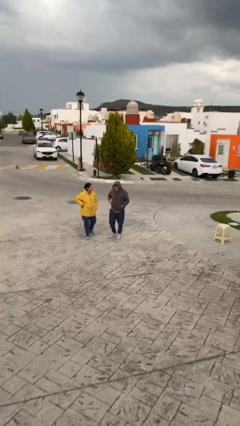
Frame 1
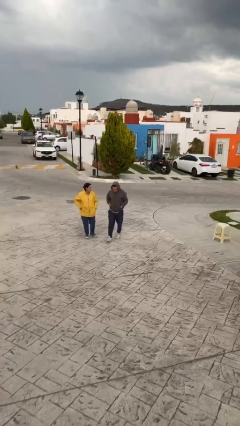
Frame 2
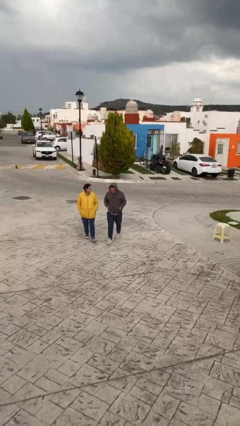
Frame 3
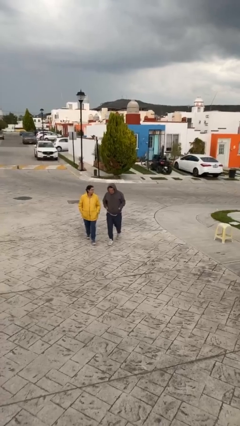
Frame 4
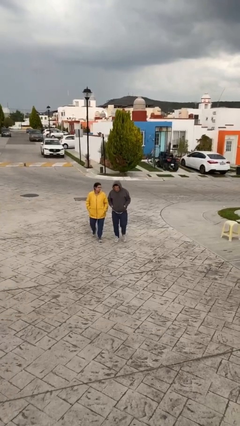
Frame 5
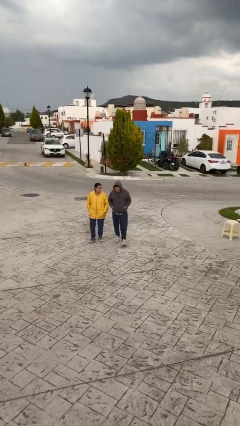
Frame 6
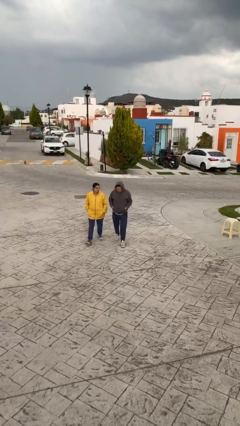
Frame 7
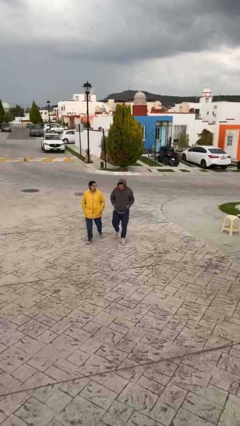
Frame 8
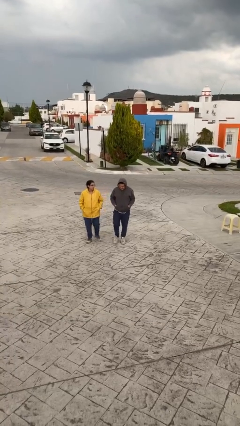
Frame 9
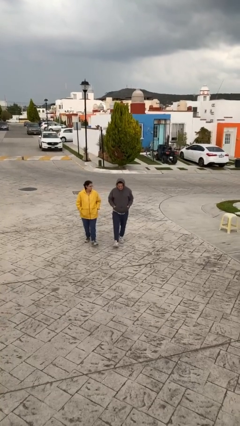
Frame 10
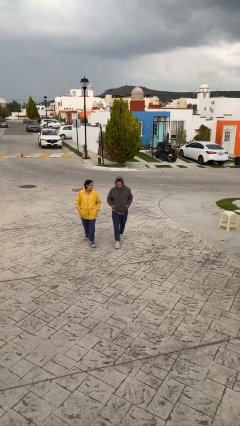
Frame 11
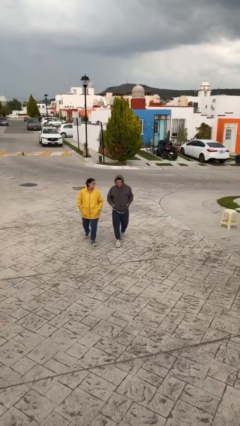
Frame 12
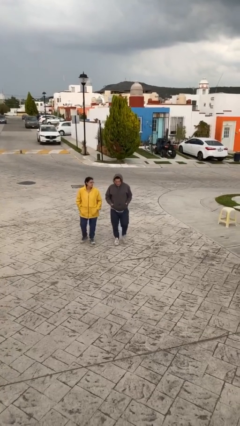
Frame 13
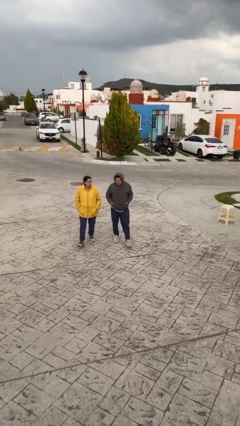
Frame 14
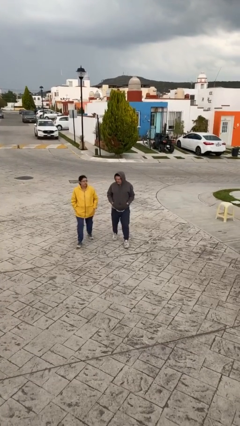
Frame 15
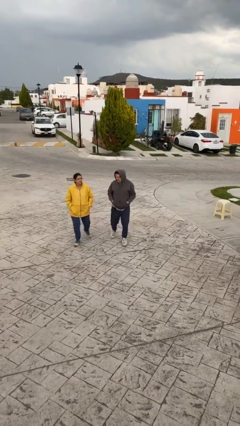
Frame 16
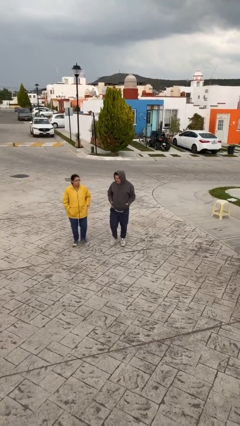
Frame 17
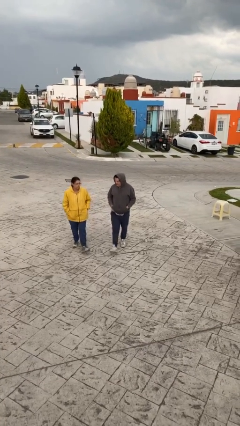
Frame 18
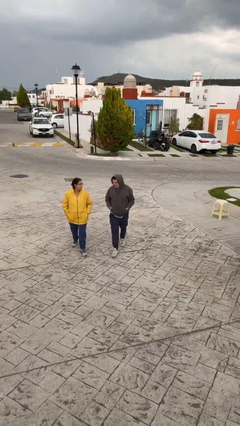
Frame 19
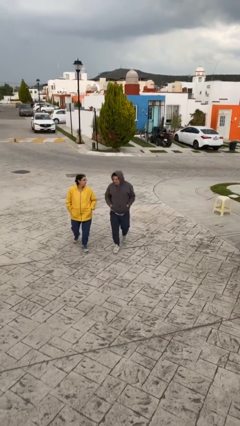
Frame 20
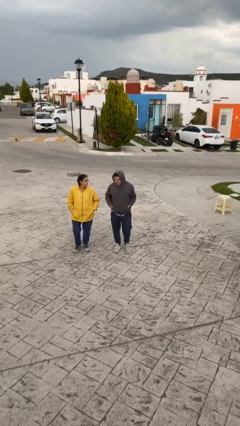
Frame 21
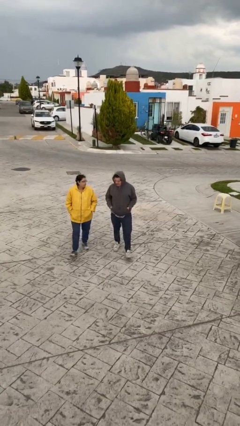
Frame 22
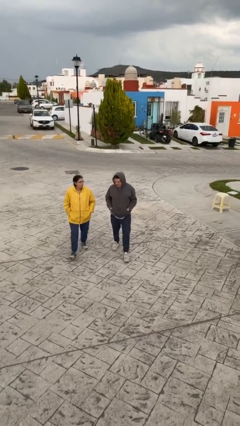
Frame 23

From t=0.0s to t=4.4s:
person talks to person

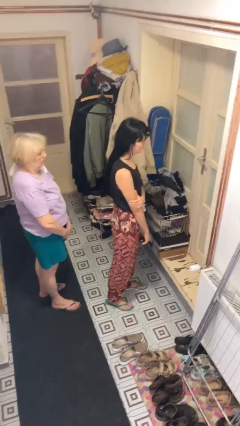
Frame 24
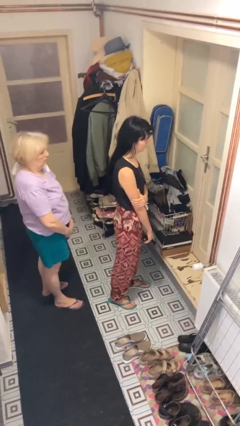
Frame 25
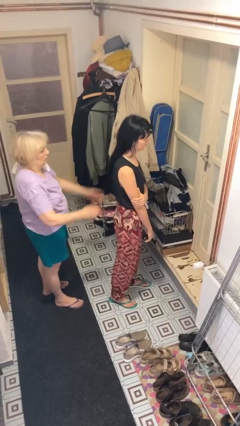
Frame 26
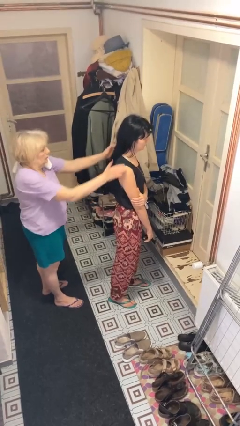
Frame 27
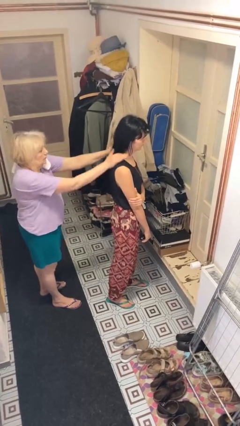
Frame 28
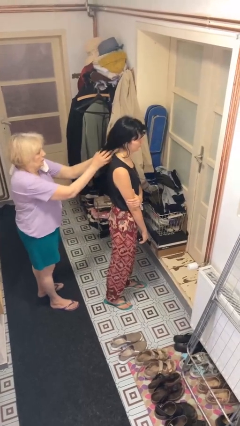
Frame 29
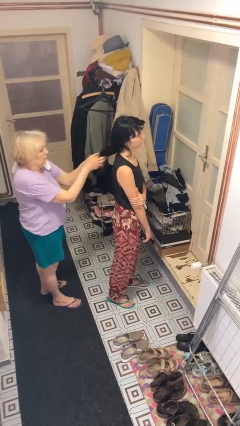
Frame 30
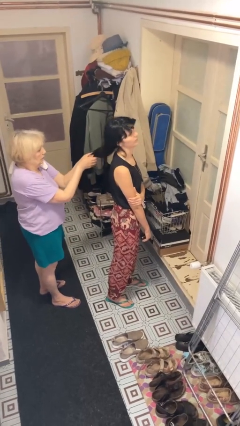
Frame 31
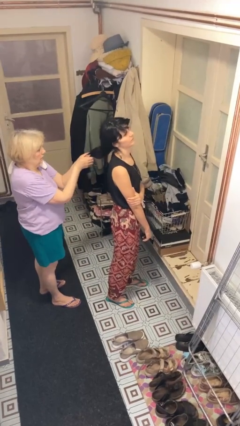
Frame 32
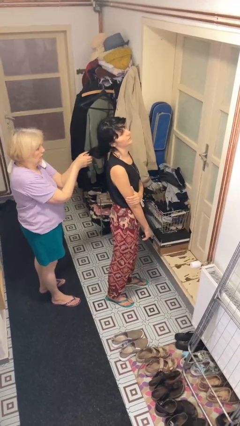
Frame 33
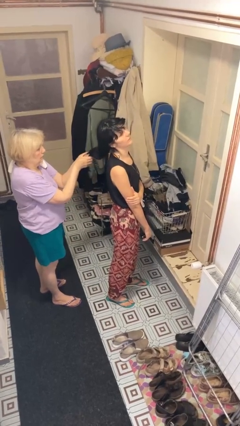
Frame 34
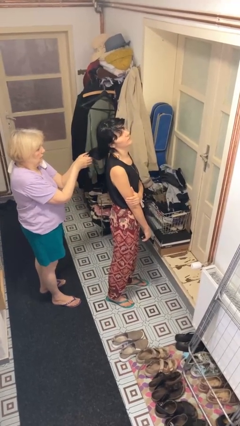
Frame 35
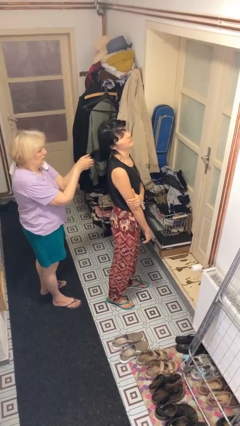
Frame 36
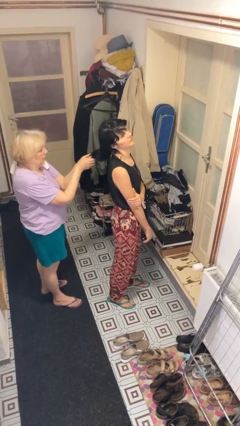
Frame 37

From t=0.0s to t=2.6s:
person grabs person by hair

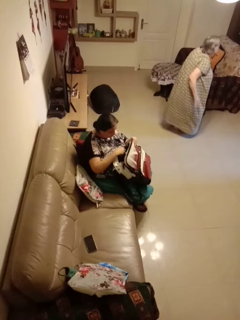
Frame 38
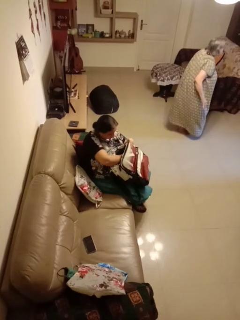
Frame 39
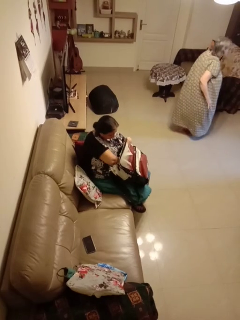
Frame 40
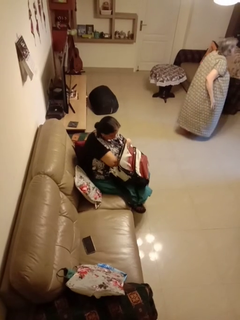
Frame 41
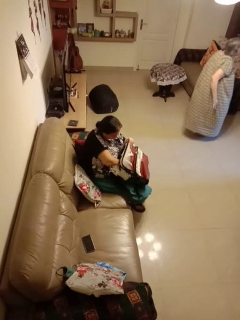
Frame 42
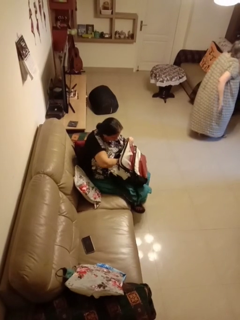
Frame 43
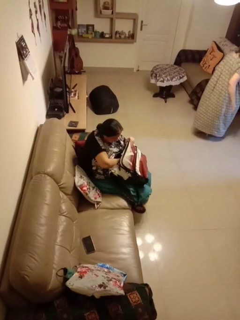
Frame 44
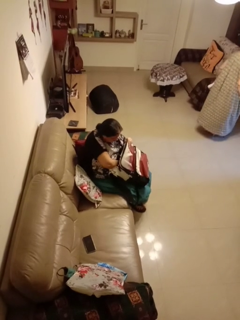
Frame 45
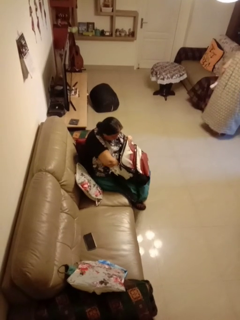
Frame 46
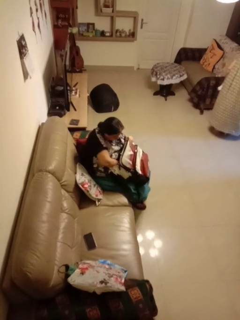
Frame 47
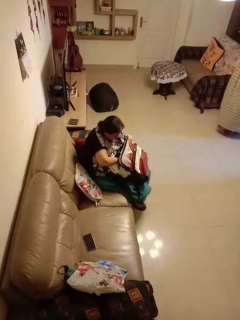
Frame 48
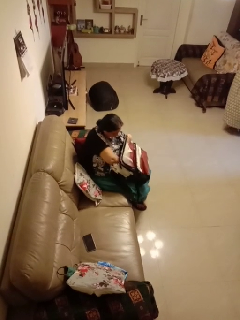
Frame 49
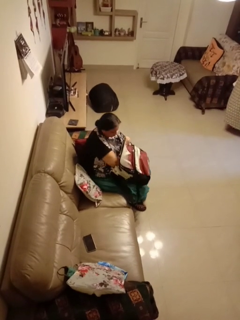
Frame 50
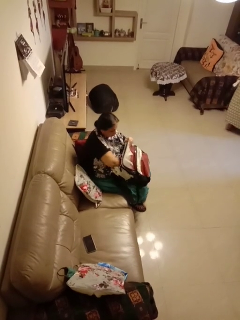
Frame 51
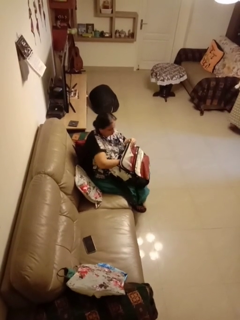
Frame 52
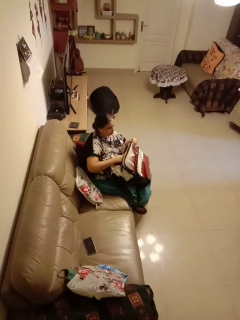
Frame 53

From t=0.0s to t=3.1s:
person searches in backpack

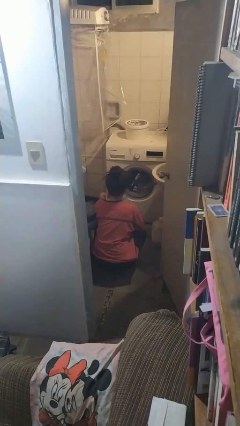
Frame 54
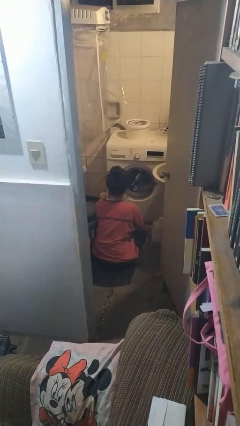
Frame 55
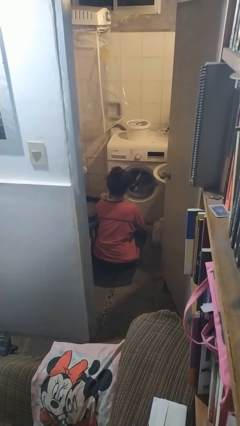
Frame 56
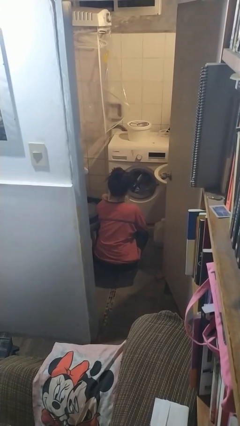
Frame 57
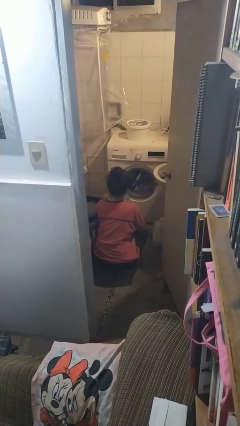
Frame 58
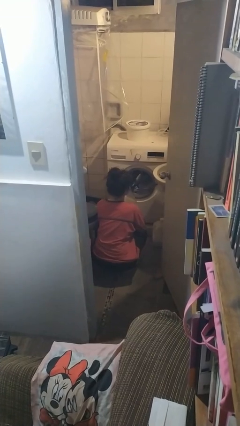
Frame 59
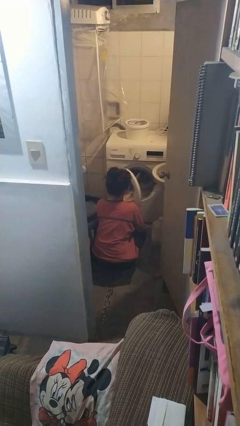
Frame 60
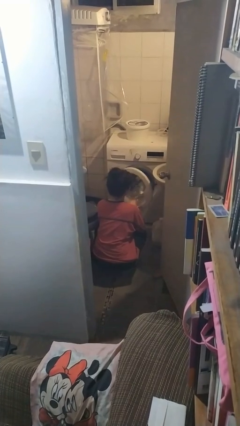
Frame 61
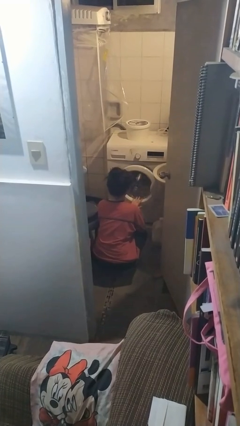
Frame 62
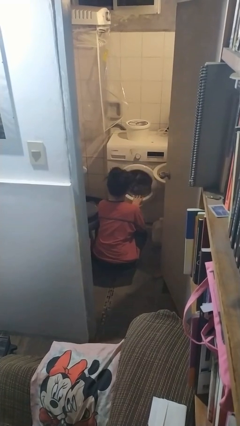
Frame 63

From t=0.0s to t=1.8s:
person closes clothes washer

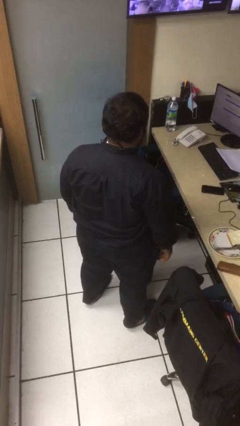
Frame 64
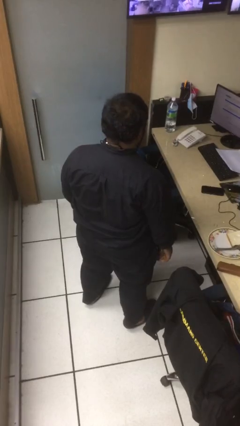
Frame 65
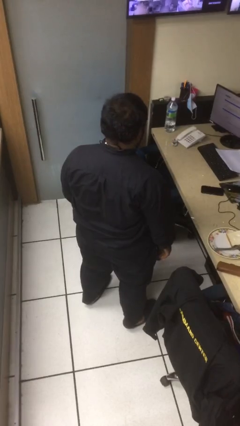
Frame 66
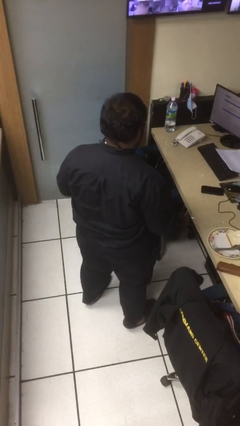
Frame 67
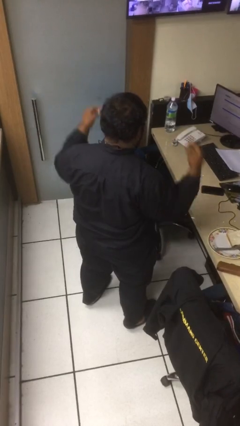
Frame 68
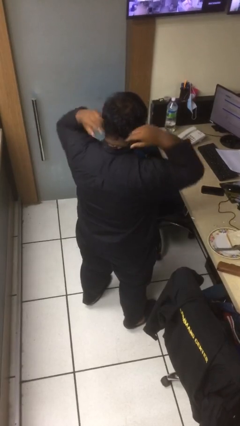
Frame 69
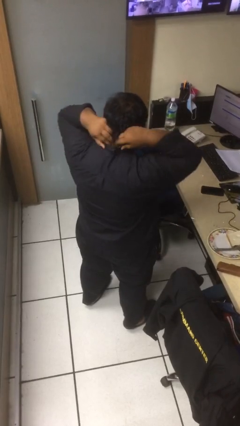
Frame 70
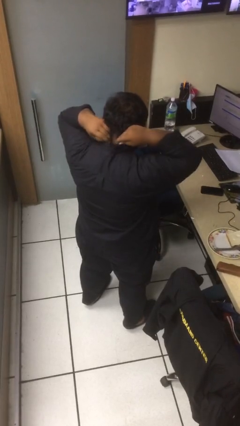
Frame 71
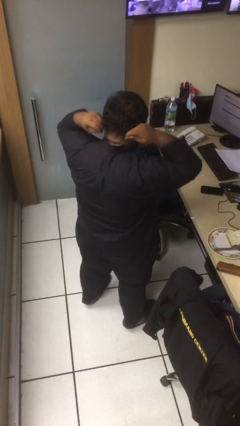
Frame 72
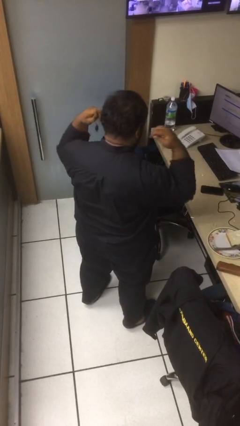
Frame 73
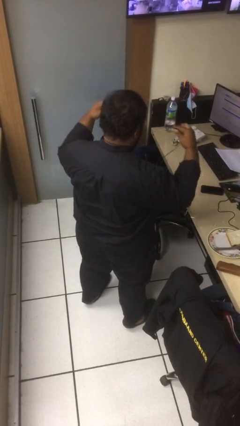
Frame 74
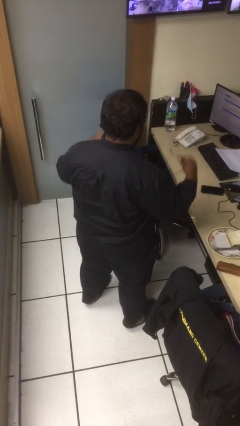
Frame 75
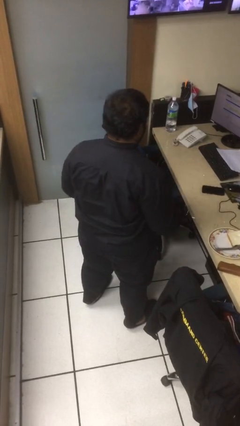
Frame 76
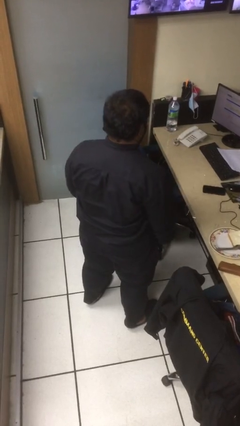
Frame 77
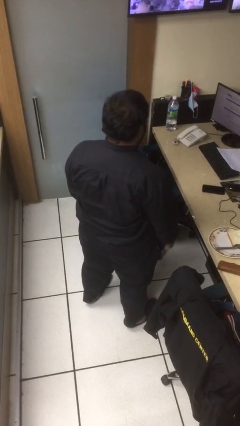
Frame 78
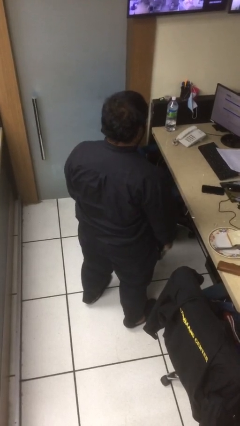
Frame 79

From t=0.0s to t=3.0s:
person takes off necklace

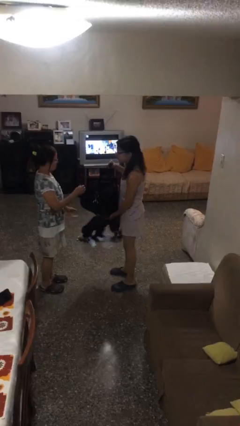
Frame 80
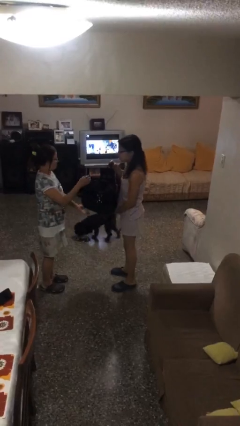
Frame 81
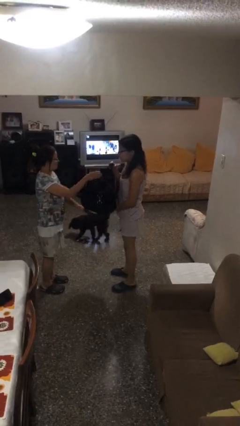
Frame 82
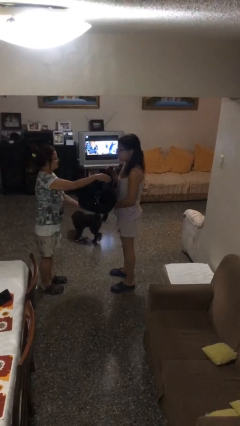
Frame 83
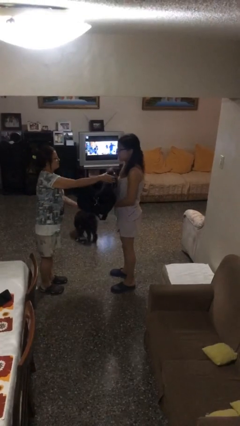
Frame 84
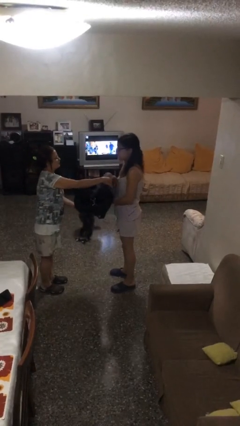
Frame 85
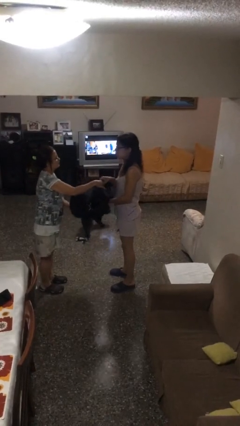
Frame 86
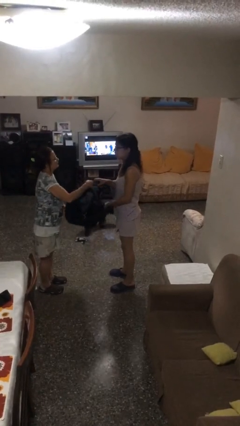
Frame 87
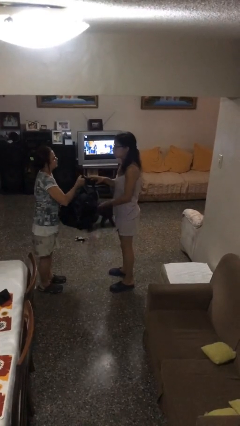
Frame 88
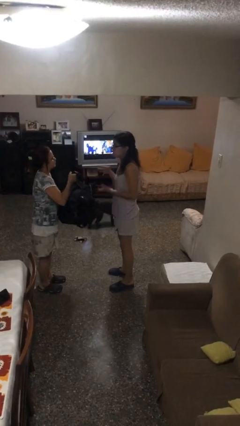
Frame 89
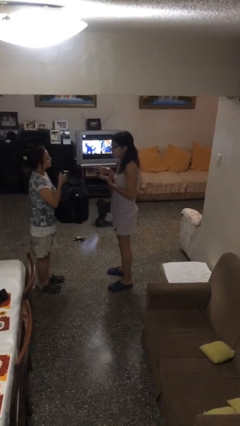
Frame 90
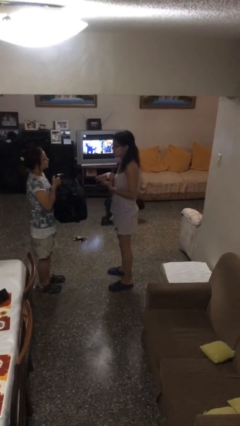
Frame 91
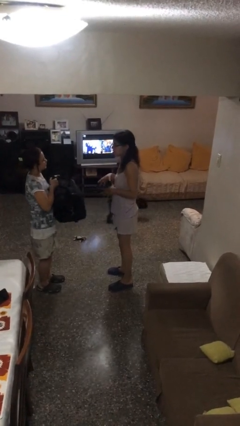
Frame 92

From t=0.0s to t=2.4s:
person transfers object to person

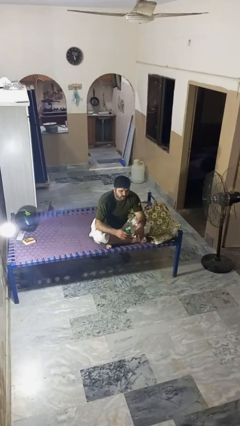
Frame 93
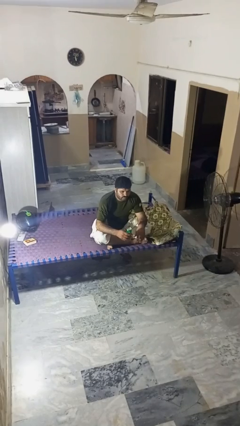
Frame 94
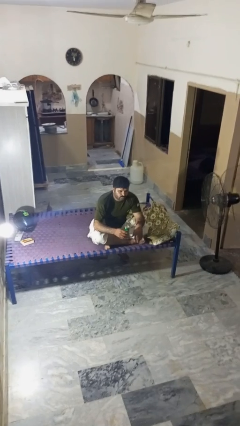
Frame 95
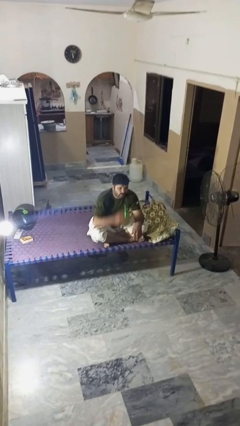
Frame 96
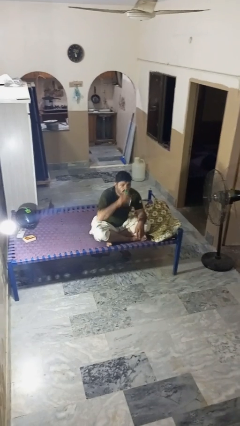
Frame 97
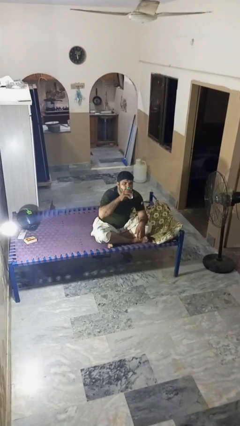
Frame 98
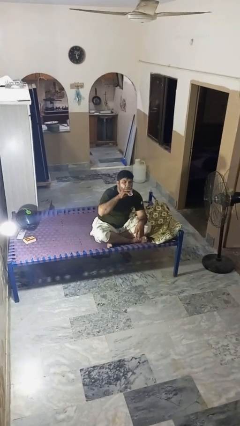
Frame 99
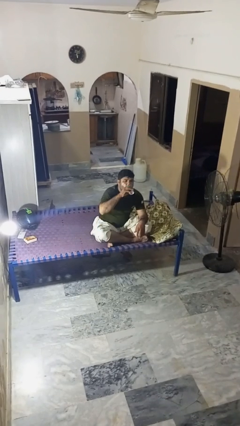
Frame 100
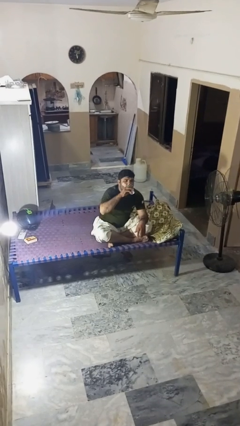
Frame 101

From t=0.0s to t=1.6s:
person drinks from beverage can
